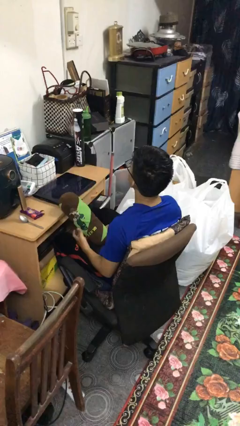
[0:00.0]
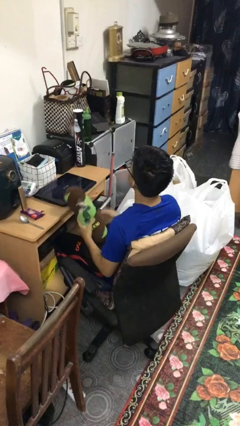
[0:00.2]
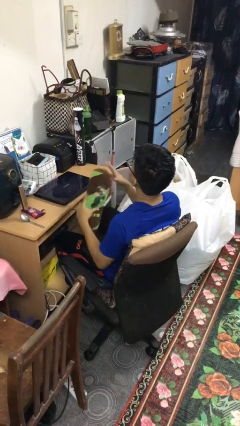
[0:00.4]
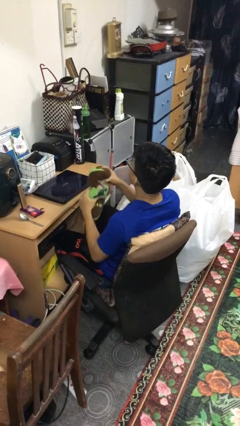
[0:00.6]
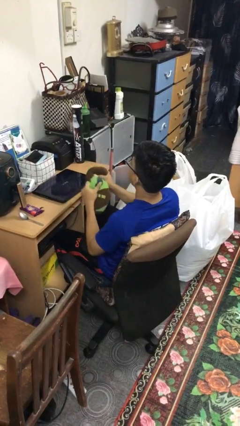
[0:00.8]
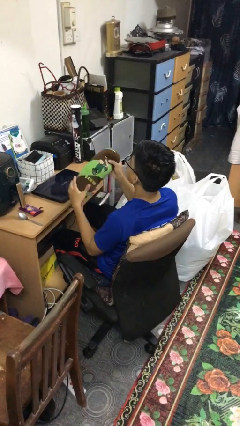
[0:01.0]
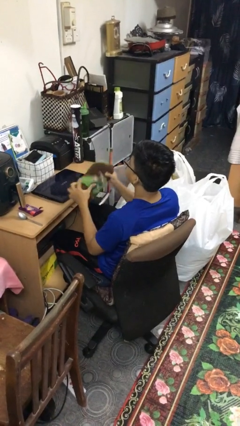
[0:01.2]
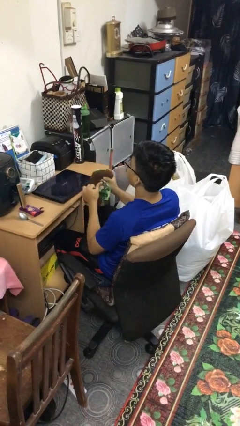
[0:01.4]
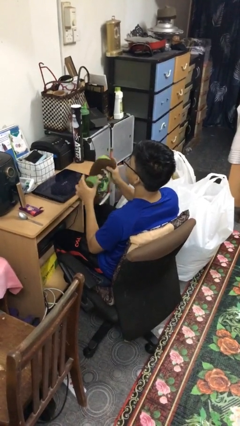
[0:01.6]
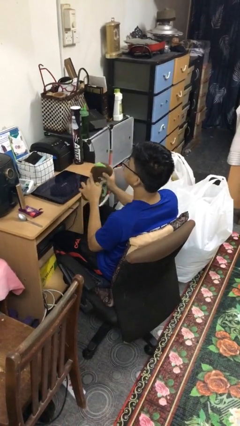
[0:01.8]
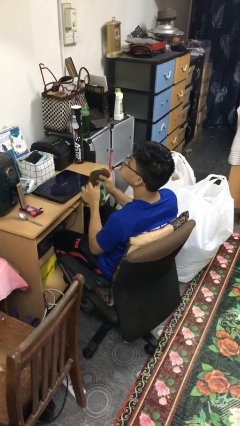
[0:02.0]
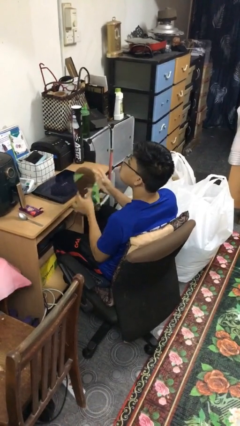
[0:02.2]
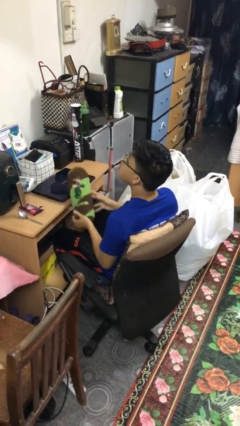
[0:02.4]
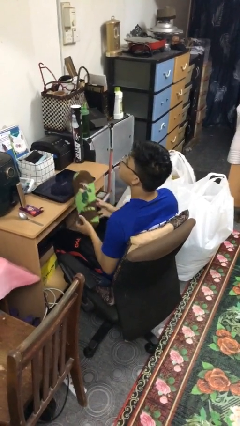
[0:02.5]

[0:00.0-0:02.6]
person squeezes object

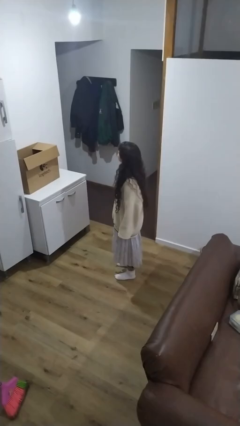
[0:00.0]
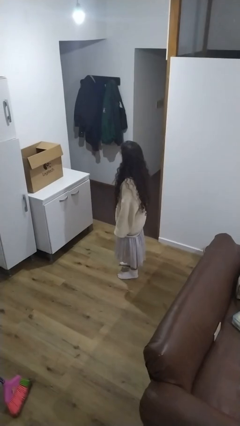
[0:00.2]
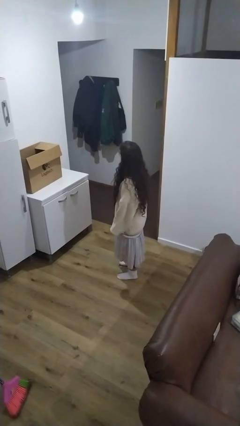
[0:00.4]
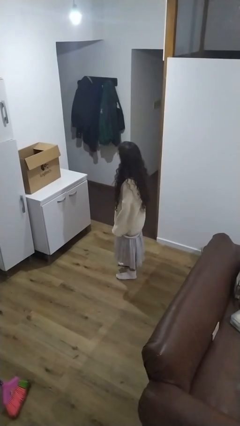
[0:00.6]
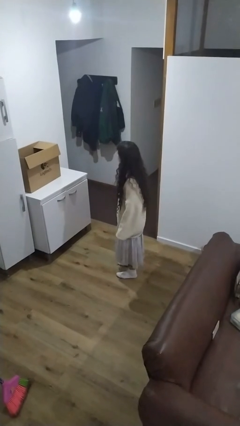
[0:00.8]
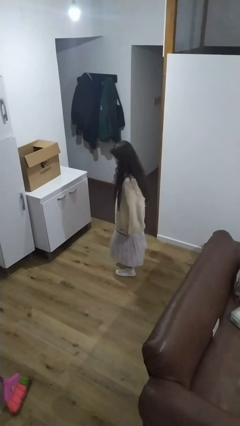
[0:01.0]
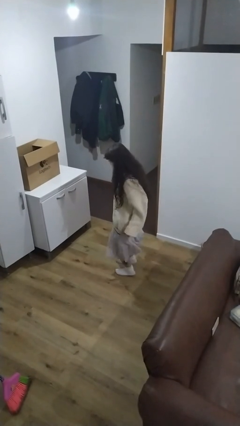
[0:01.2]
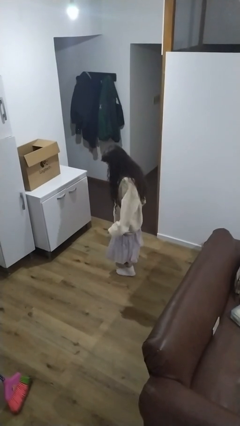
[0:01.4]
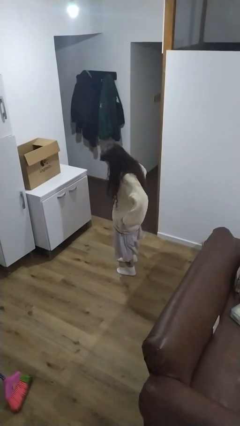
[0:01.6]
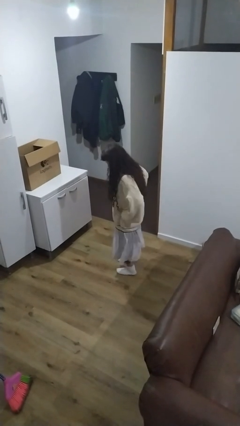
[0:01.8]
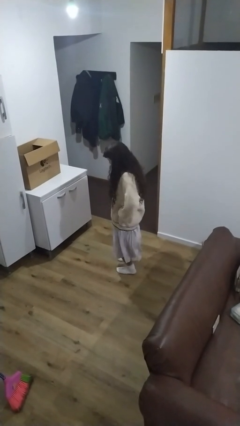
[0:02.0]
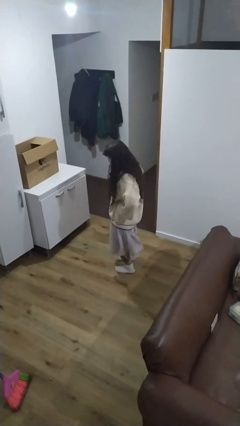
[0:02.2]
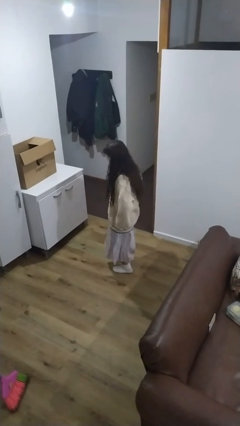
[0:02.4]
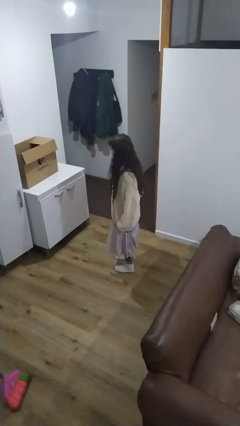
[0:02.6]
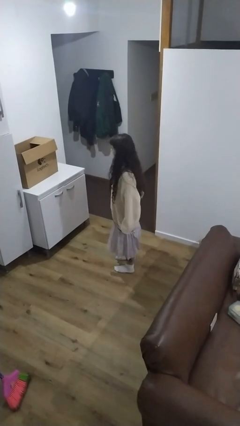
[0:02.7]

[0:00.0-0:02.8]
person wiggles hips

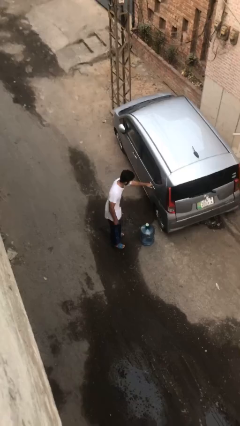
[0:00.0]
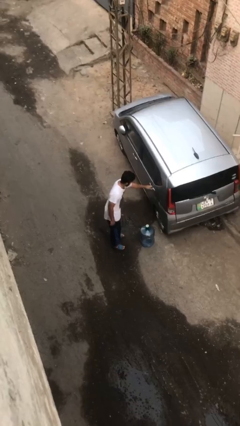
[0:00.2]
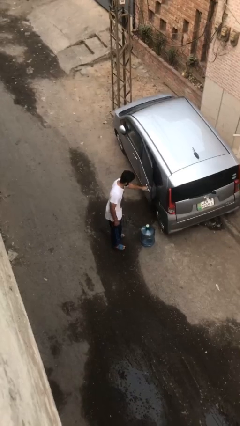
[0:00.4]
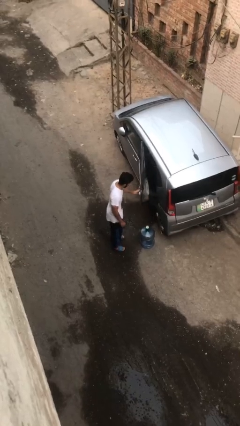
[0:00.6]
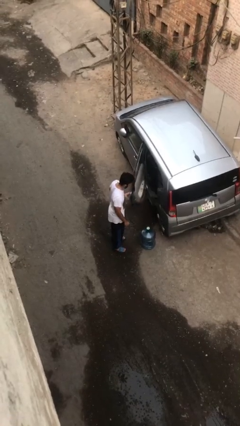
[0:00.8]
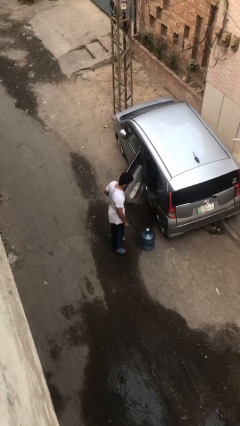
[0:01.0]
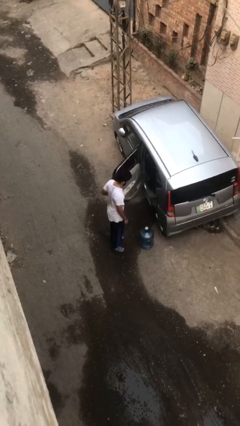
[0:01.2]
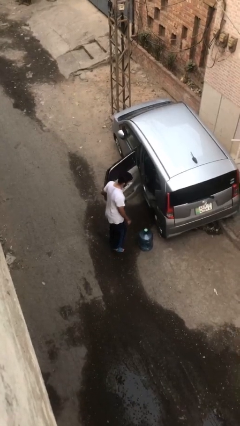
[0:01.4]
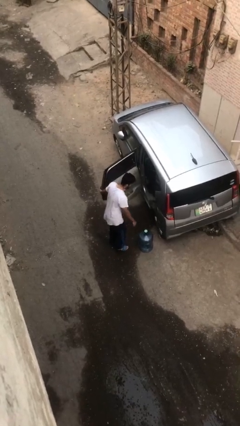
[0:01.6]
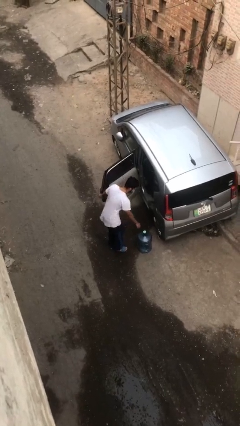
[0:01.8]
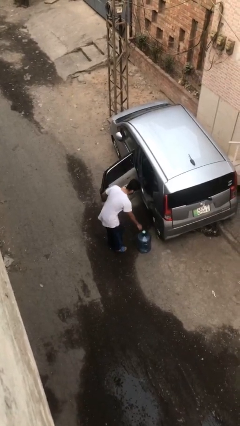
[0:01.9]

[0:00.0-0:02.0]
person opens car door

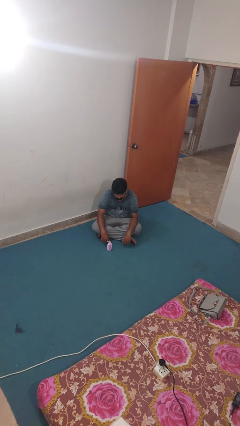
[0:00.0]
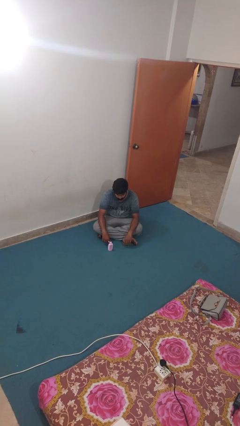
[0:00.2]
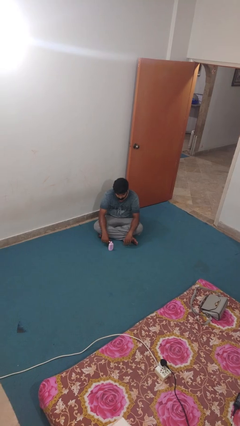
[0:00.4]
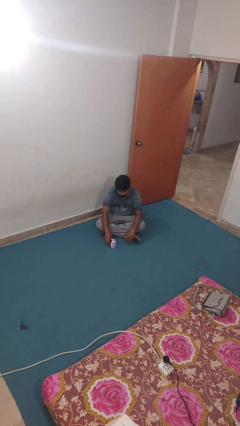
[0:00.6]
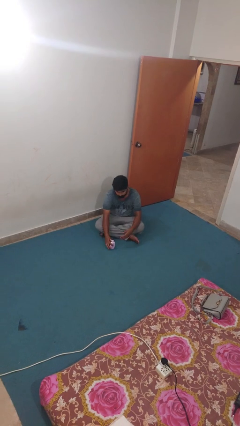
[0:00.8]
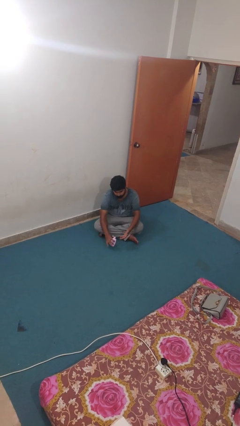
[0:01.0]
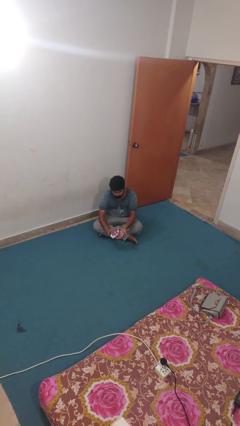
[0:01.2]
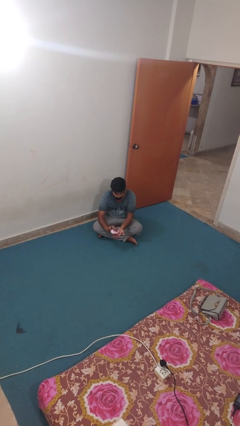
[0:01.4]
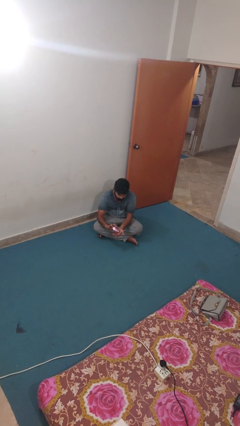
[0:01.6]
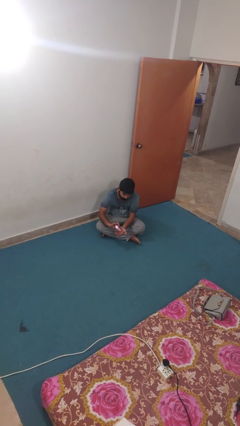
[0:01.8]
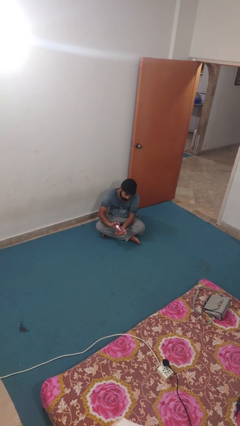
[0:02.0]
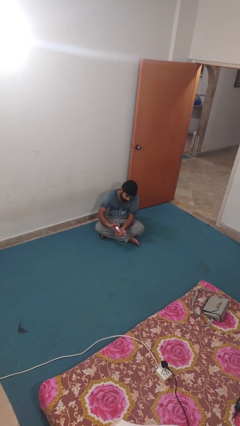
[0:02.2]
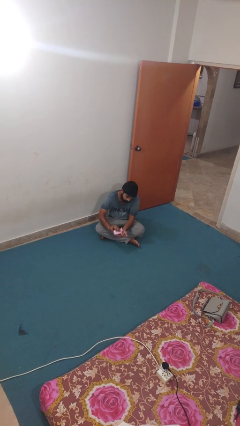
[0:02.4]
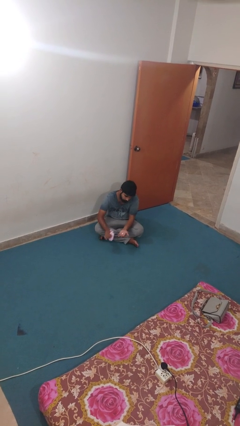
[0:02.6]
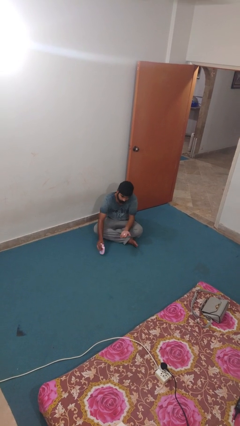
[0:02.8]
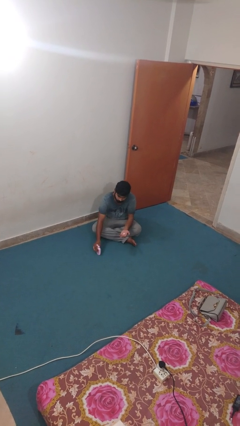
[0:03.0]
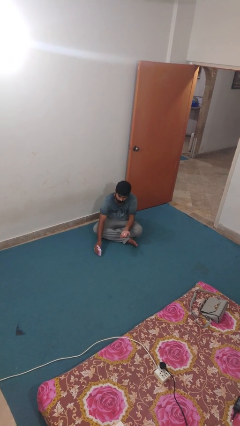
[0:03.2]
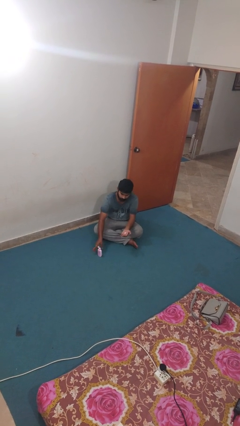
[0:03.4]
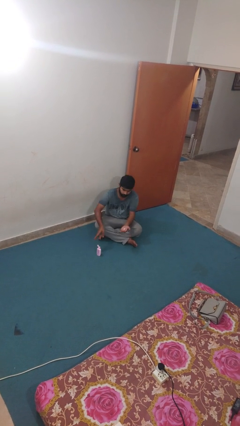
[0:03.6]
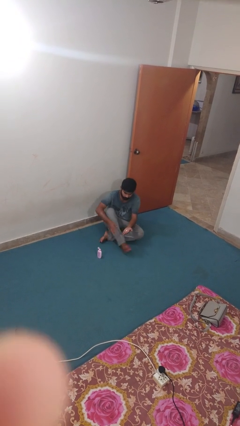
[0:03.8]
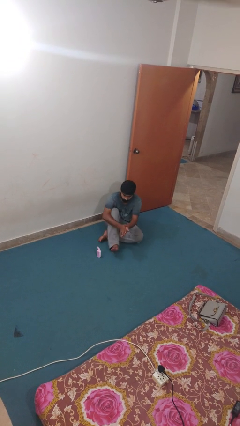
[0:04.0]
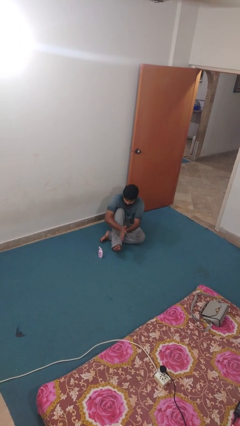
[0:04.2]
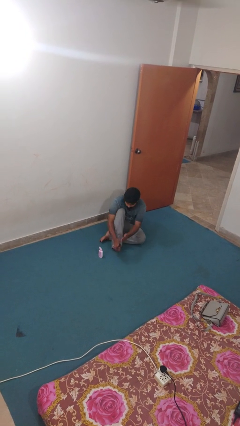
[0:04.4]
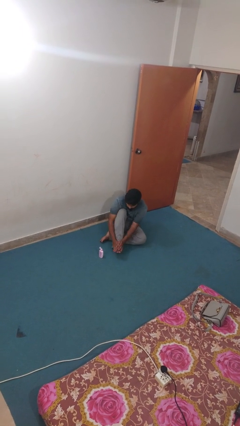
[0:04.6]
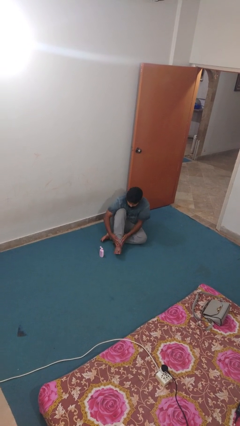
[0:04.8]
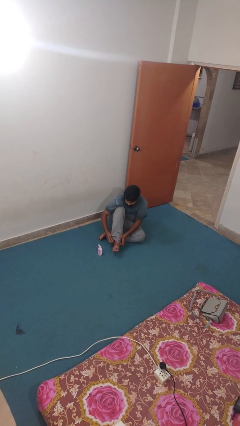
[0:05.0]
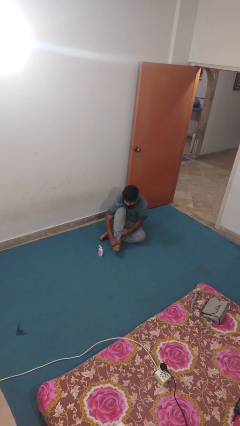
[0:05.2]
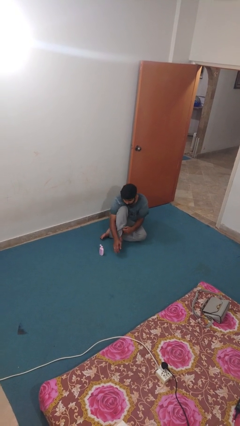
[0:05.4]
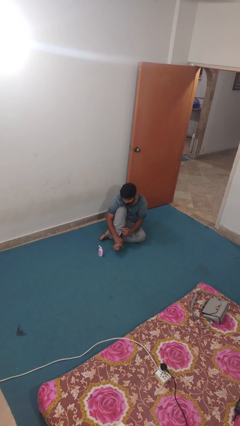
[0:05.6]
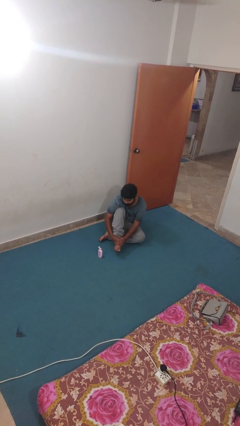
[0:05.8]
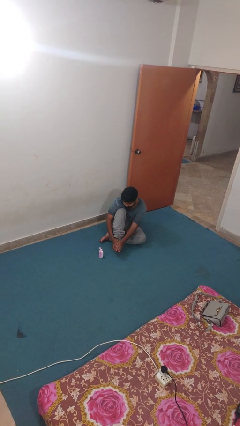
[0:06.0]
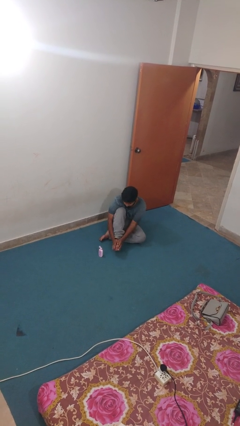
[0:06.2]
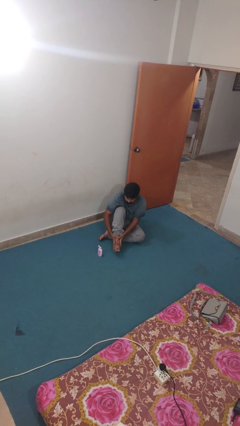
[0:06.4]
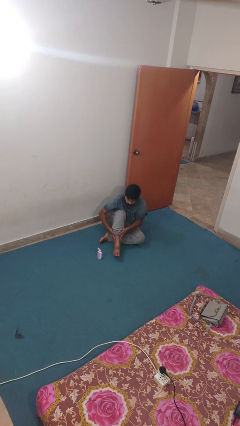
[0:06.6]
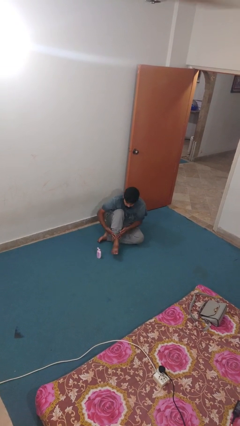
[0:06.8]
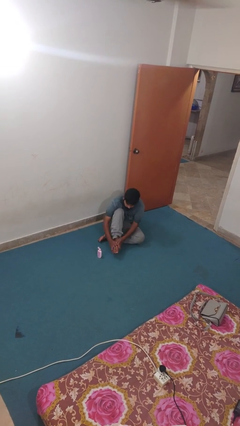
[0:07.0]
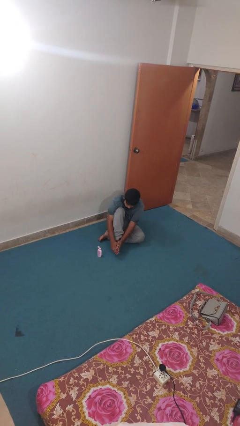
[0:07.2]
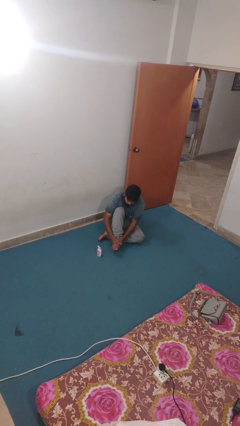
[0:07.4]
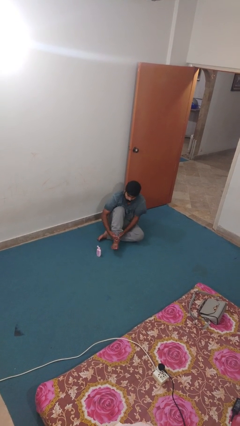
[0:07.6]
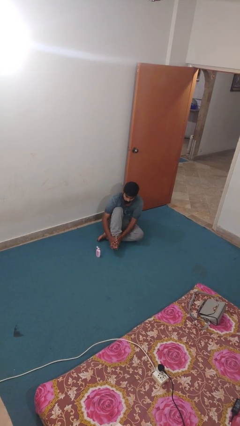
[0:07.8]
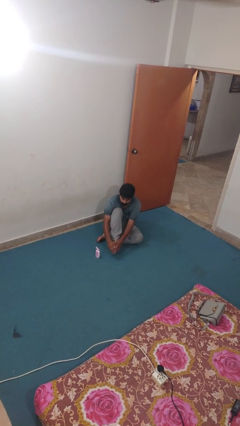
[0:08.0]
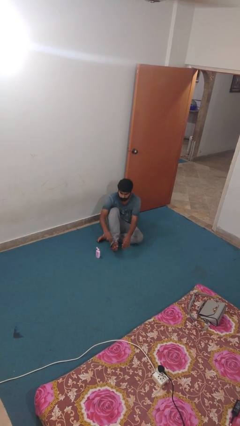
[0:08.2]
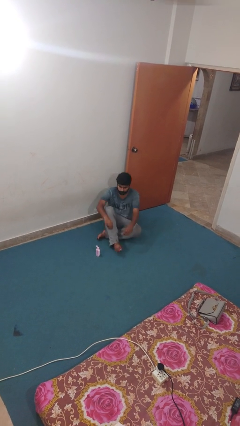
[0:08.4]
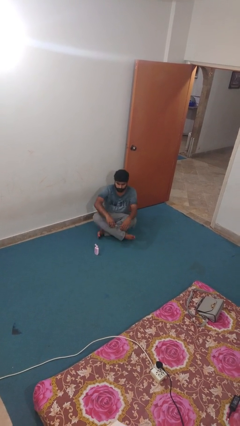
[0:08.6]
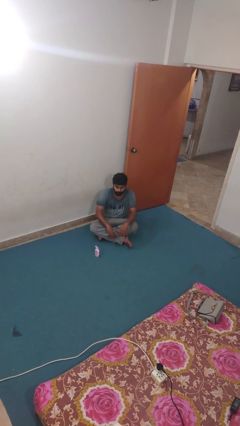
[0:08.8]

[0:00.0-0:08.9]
person applies sunscreen

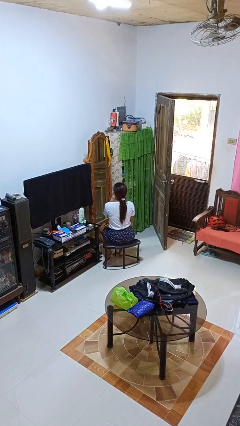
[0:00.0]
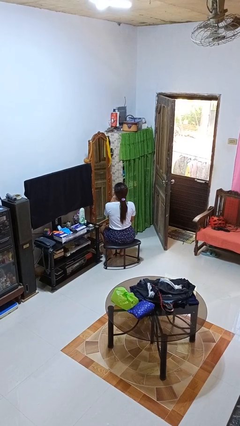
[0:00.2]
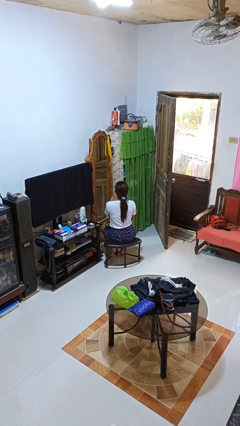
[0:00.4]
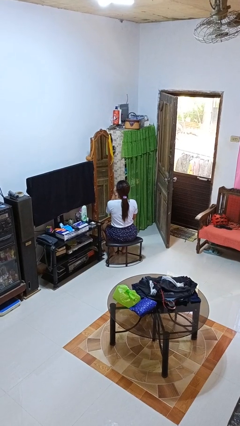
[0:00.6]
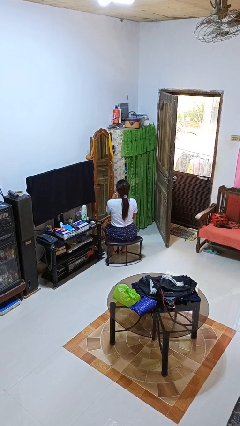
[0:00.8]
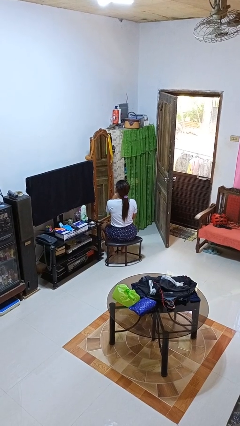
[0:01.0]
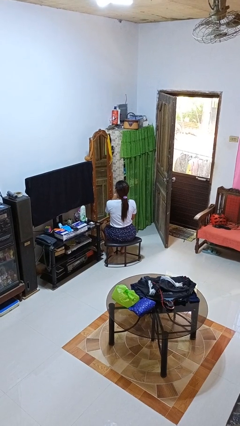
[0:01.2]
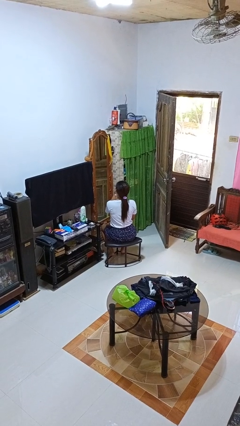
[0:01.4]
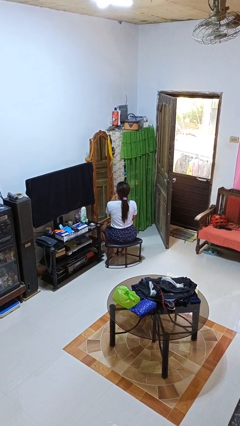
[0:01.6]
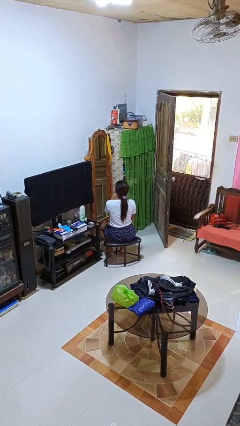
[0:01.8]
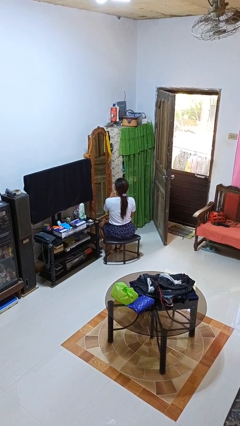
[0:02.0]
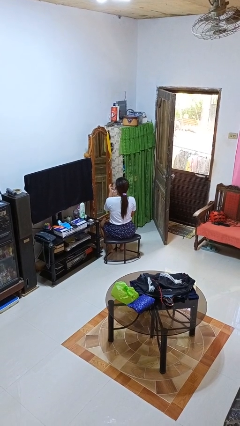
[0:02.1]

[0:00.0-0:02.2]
person applies lip makeup
